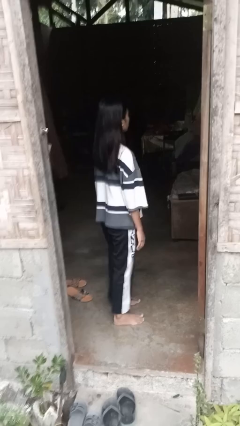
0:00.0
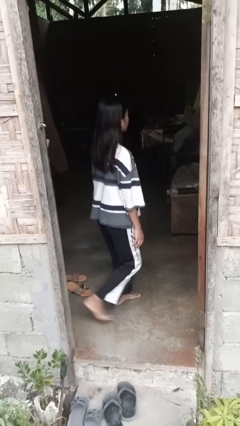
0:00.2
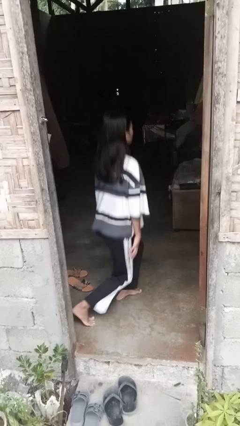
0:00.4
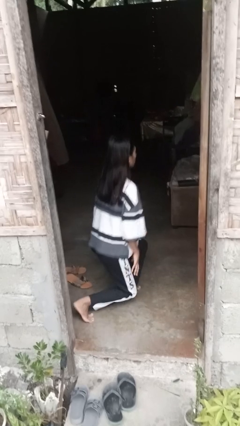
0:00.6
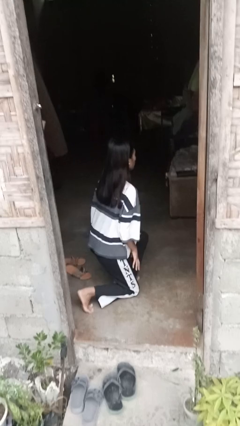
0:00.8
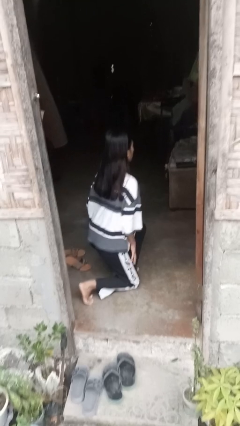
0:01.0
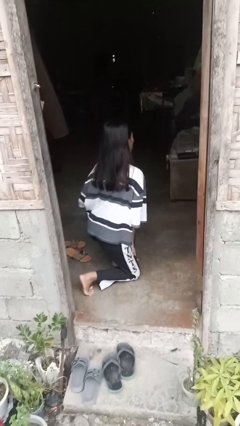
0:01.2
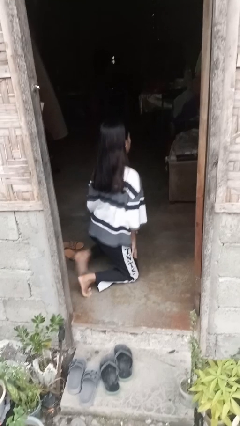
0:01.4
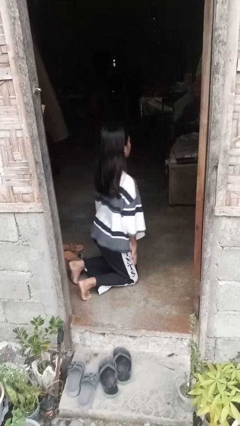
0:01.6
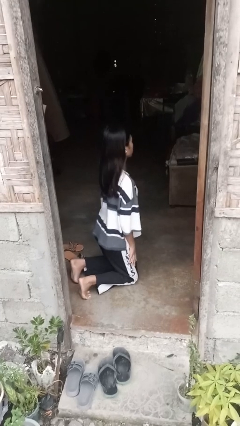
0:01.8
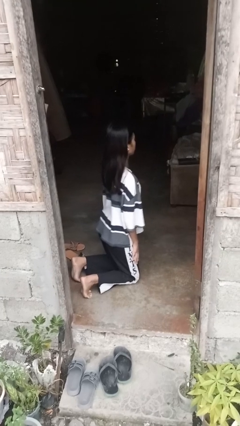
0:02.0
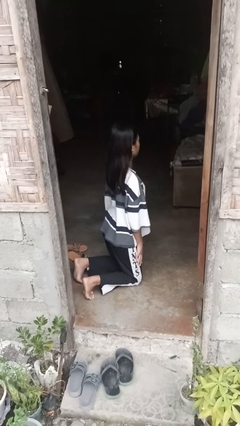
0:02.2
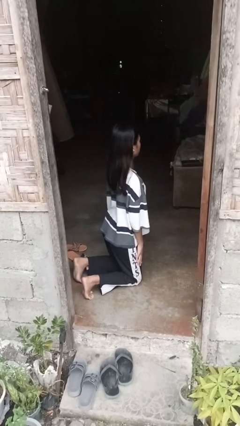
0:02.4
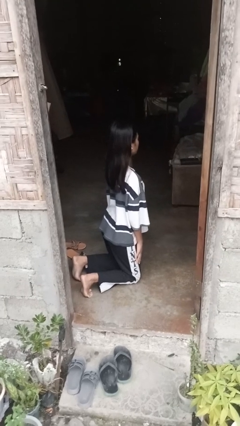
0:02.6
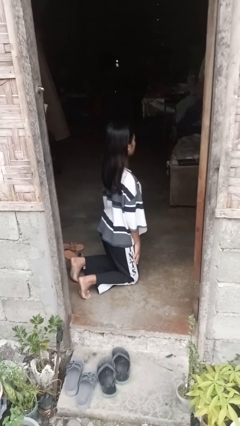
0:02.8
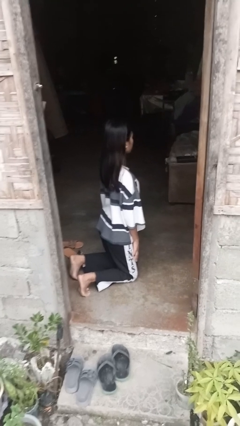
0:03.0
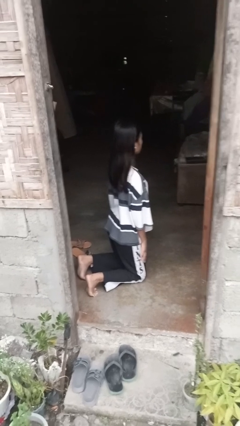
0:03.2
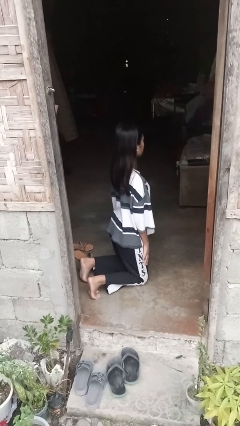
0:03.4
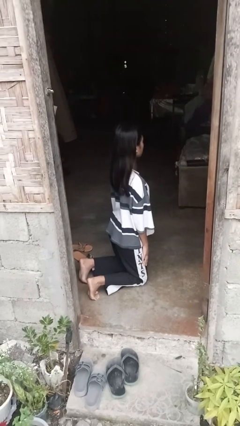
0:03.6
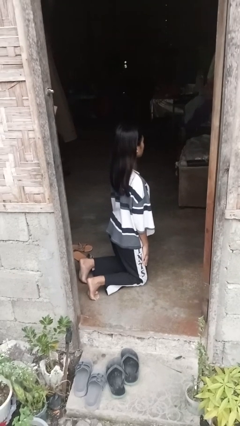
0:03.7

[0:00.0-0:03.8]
person kneels

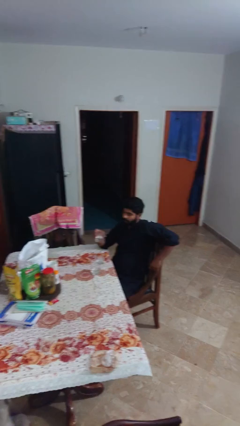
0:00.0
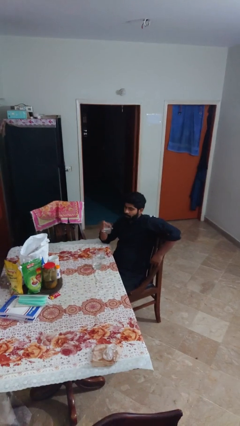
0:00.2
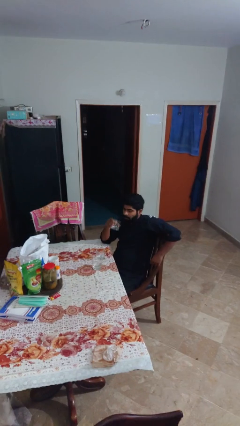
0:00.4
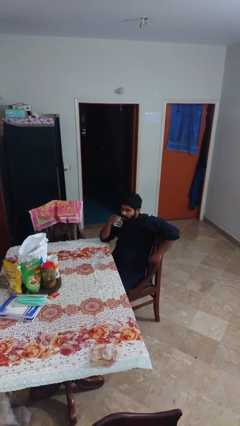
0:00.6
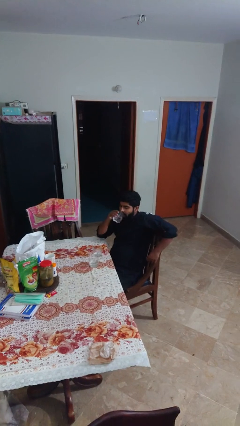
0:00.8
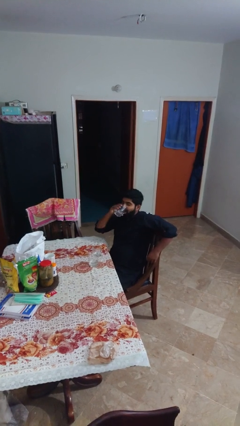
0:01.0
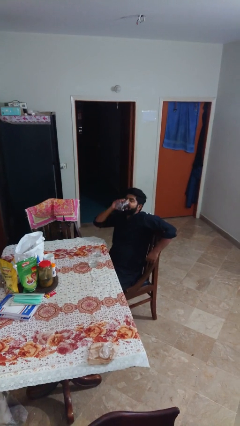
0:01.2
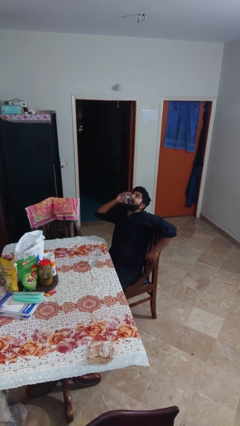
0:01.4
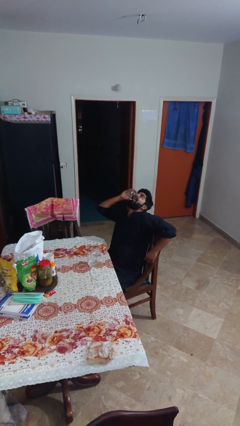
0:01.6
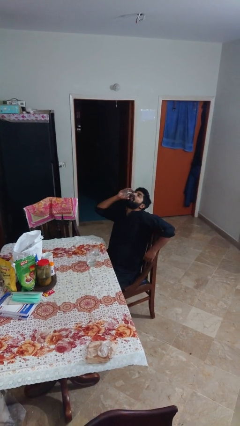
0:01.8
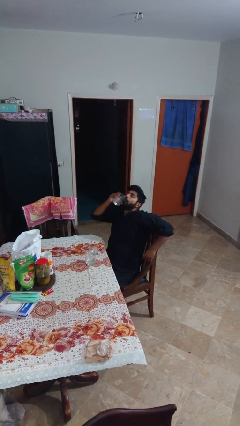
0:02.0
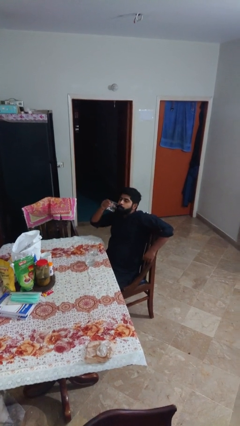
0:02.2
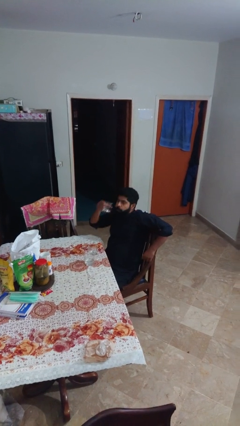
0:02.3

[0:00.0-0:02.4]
person drinks from shotglass

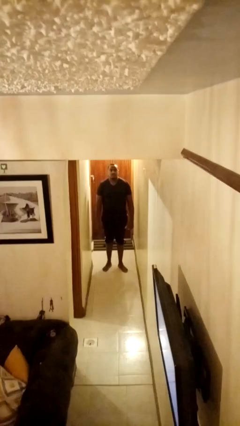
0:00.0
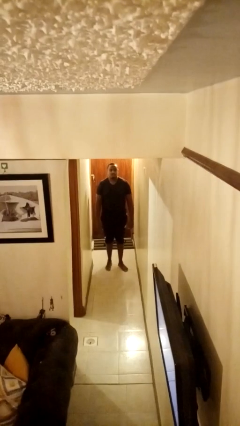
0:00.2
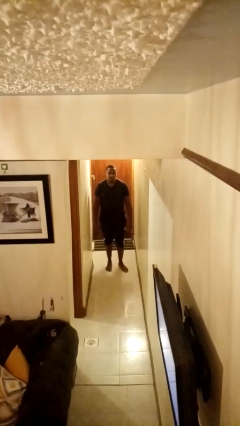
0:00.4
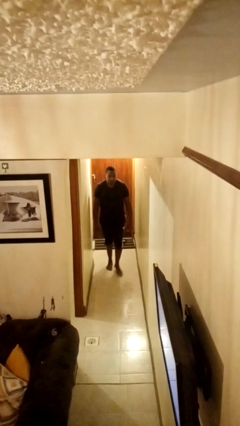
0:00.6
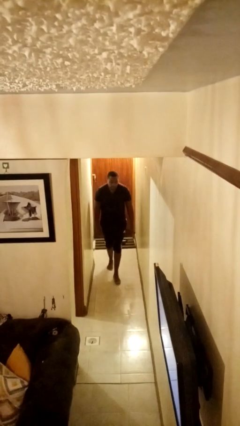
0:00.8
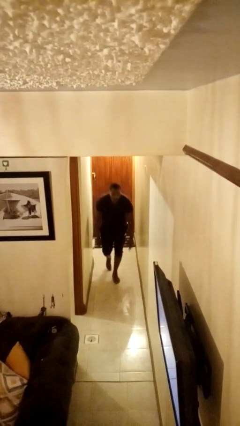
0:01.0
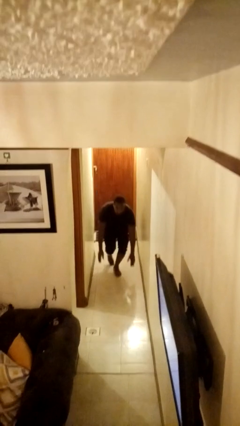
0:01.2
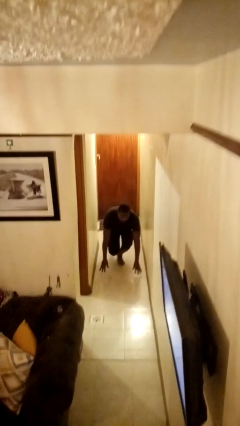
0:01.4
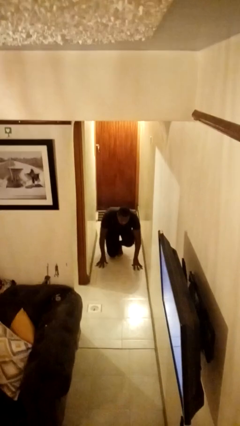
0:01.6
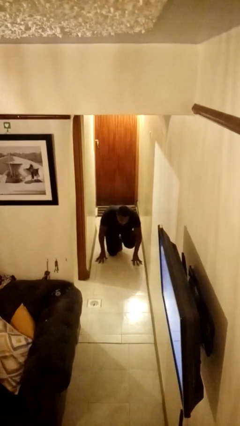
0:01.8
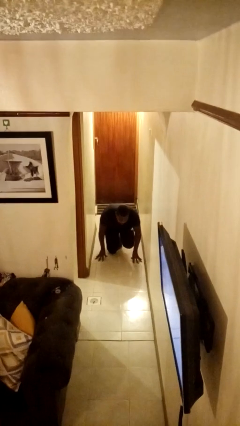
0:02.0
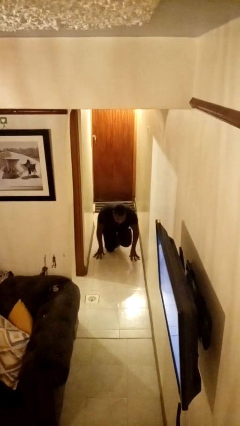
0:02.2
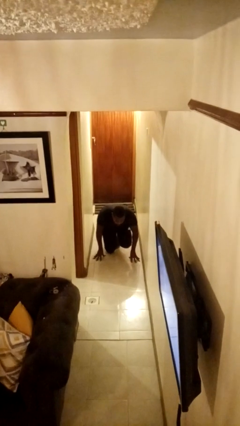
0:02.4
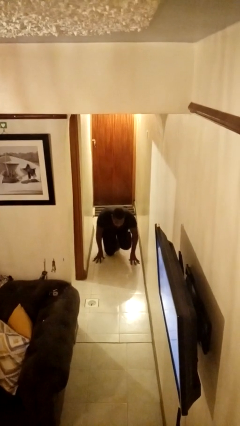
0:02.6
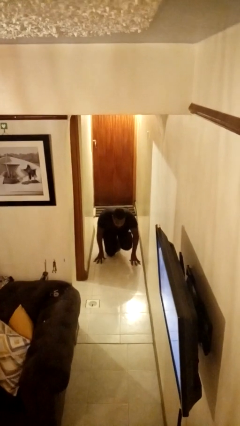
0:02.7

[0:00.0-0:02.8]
person trips on object on floor

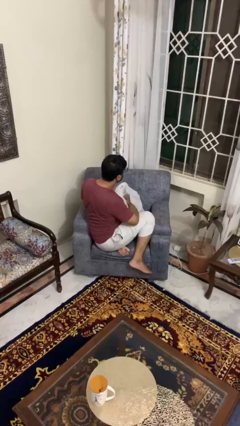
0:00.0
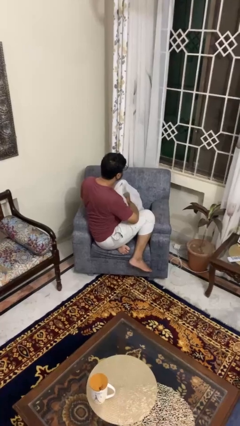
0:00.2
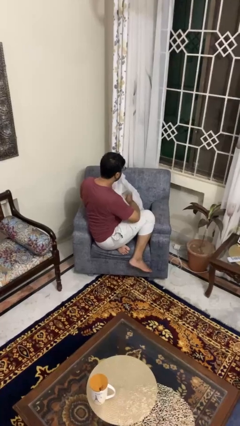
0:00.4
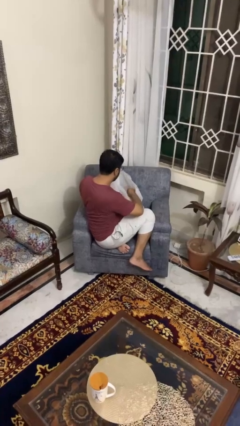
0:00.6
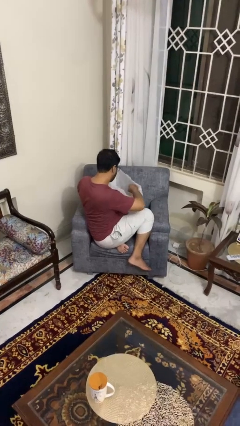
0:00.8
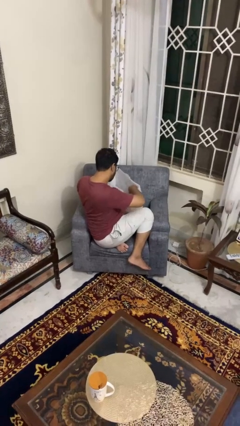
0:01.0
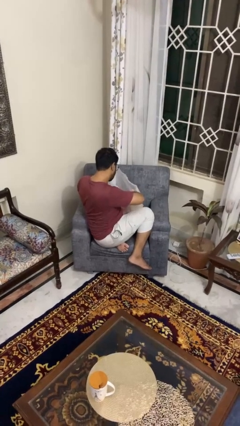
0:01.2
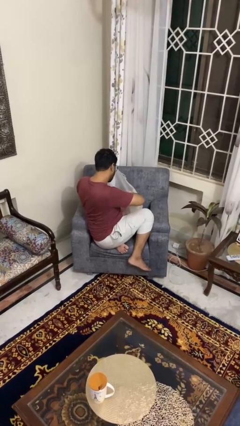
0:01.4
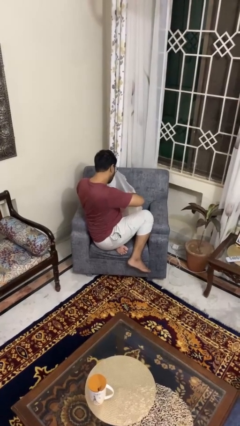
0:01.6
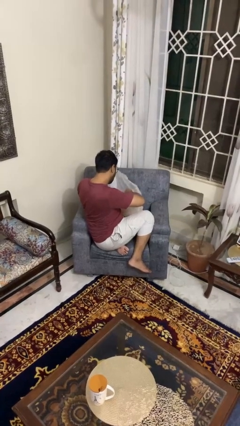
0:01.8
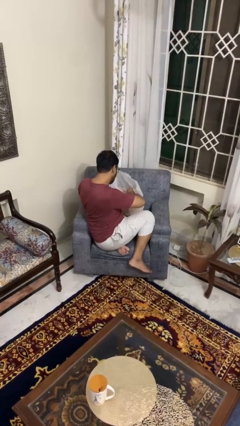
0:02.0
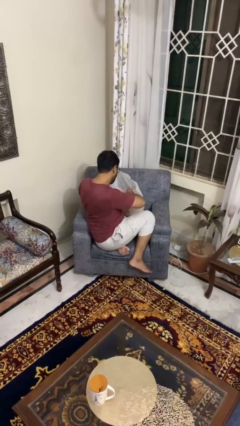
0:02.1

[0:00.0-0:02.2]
person searches in bag

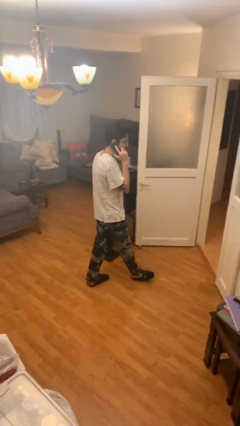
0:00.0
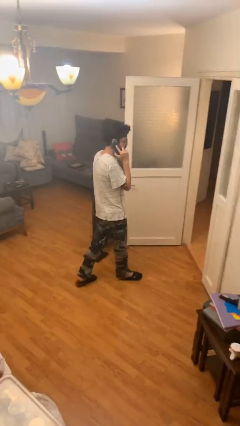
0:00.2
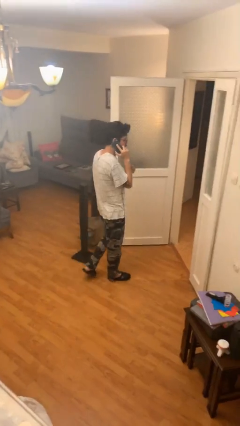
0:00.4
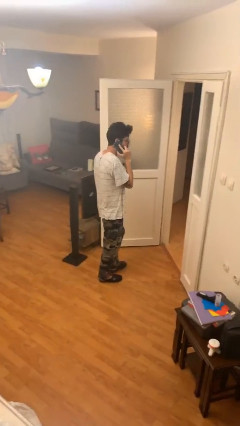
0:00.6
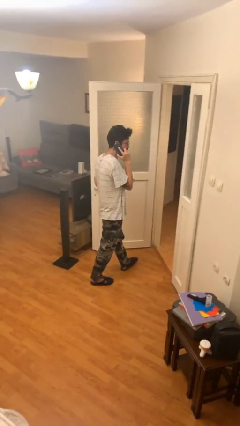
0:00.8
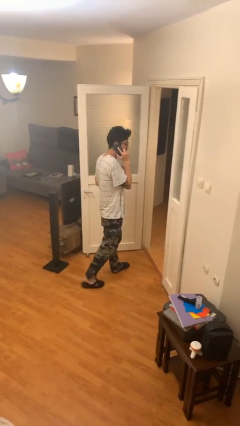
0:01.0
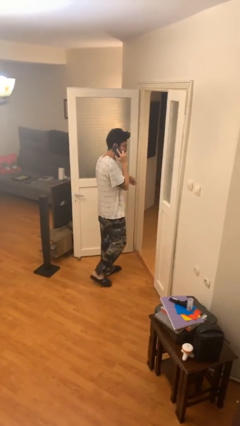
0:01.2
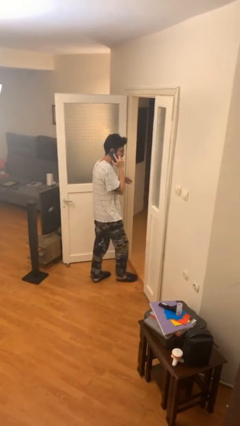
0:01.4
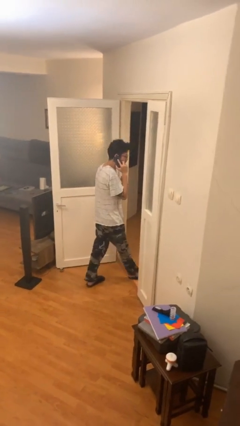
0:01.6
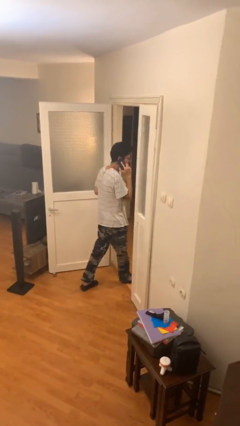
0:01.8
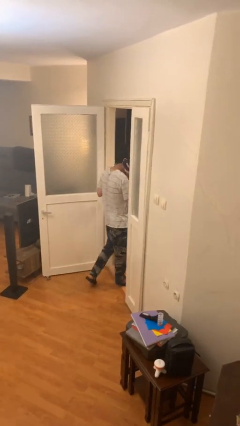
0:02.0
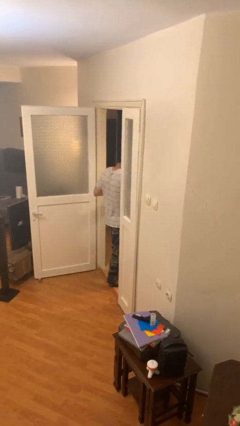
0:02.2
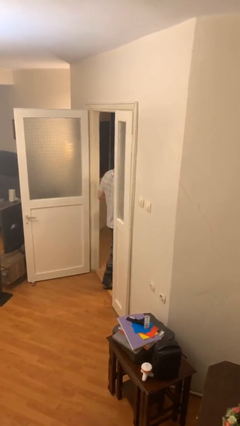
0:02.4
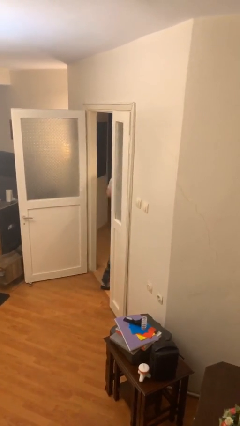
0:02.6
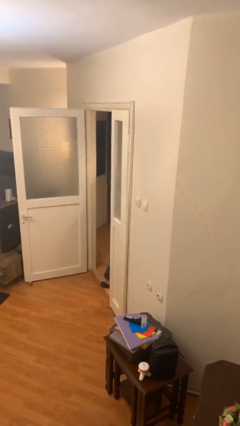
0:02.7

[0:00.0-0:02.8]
person exits scene through structure

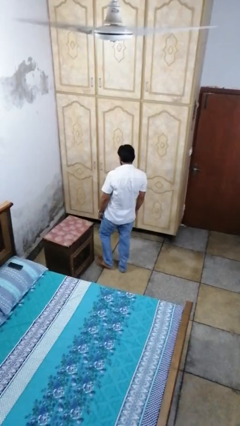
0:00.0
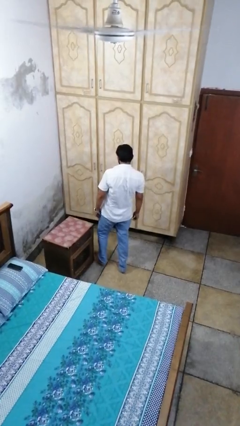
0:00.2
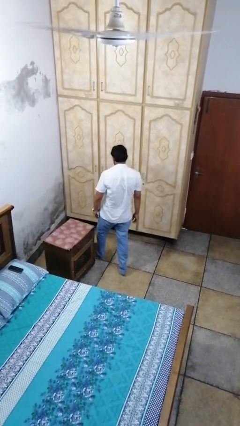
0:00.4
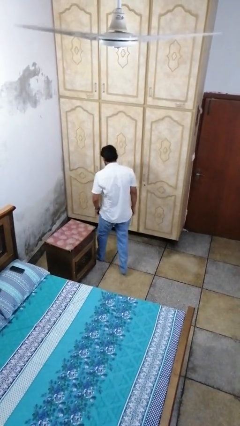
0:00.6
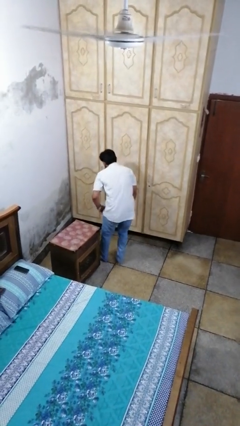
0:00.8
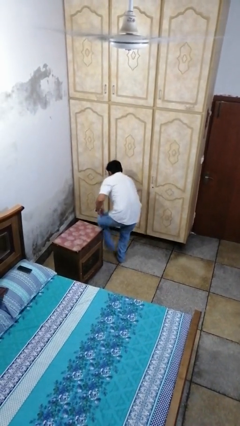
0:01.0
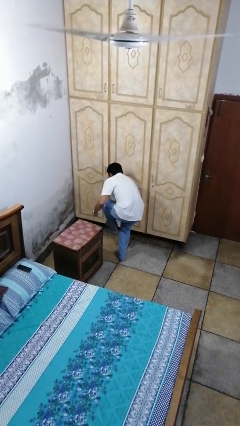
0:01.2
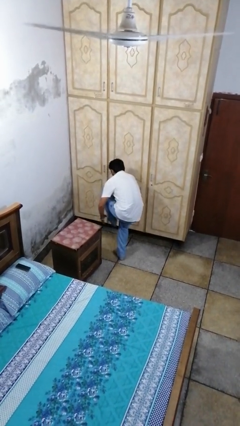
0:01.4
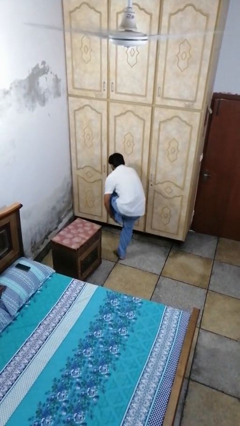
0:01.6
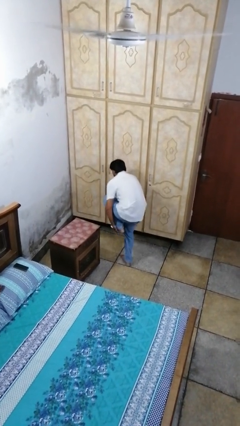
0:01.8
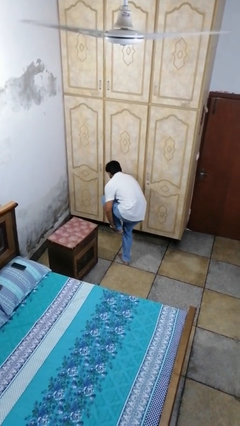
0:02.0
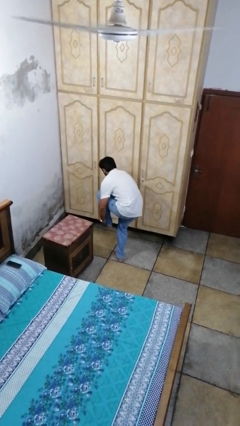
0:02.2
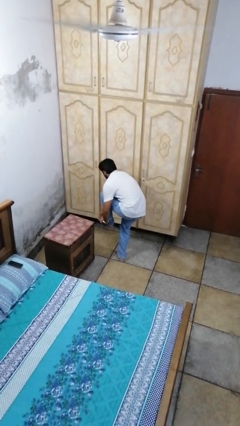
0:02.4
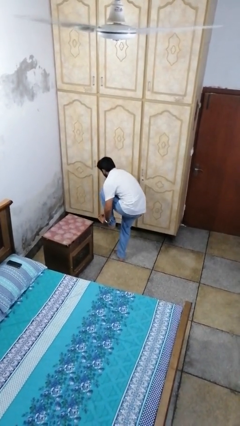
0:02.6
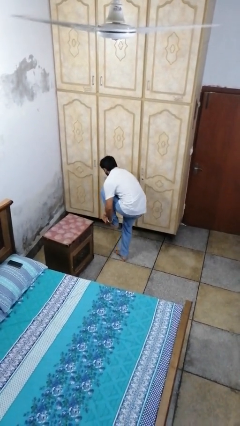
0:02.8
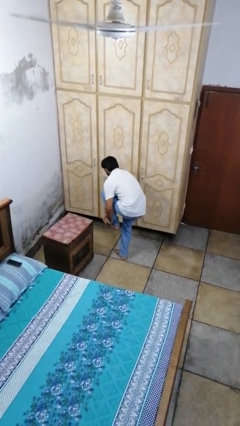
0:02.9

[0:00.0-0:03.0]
person stubs toe

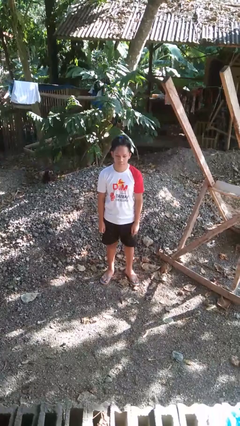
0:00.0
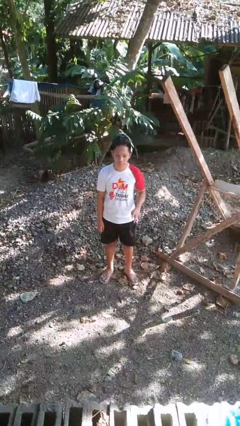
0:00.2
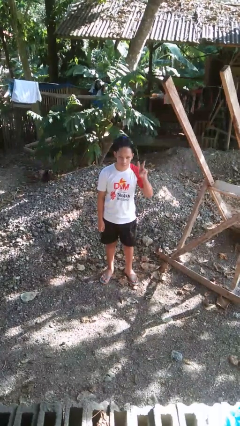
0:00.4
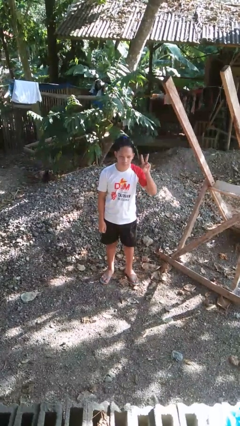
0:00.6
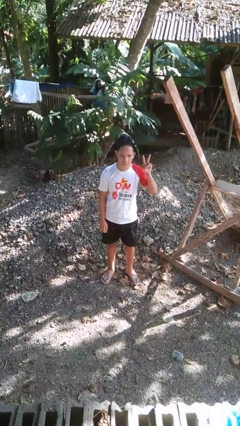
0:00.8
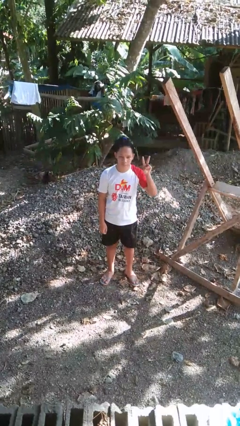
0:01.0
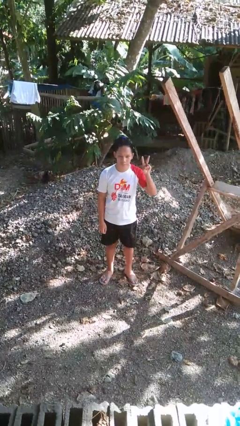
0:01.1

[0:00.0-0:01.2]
person gestures peace
